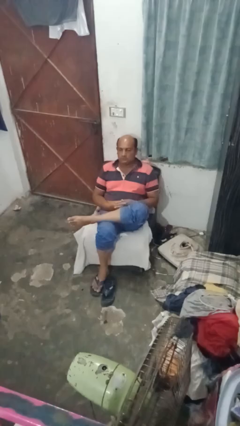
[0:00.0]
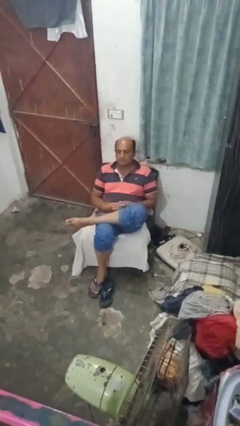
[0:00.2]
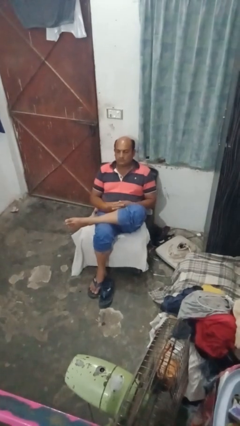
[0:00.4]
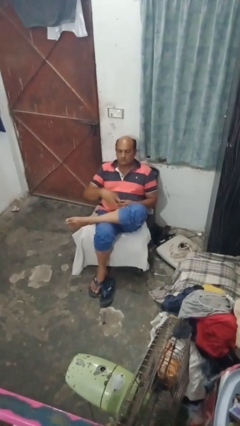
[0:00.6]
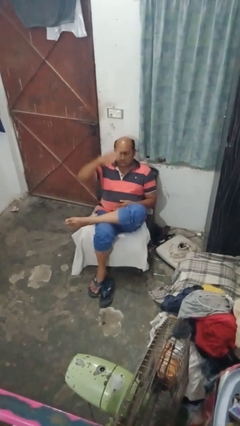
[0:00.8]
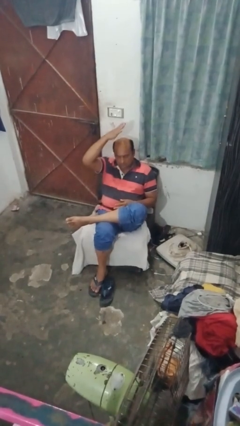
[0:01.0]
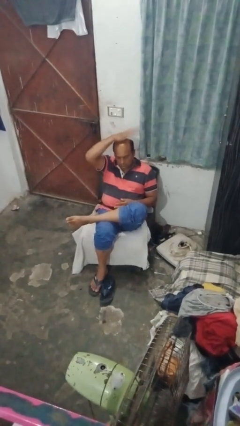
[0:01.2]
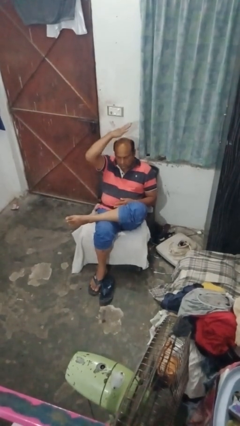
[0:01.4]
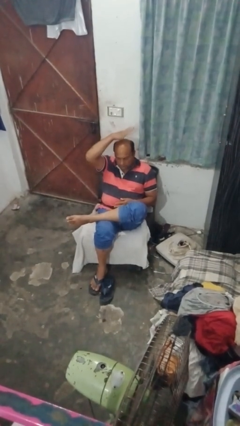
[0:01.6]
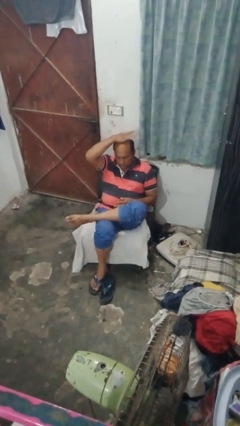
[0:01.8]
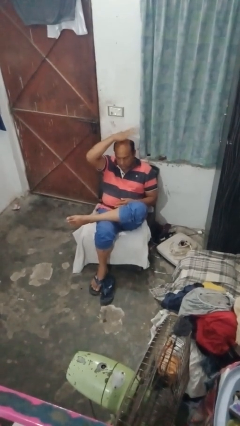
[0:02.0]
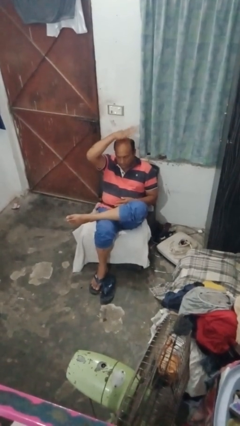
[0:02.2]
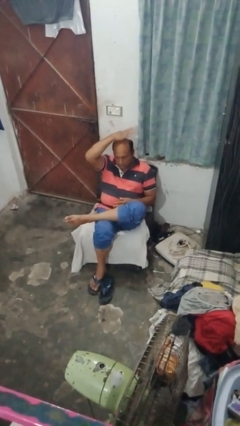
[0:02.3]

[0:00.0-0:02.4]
person pats head

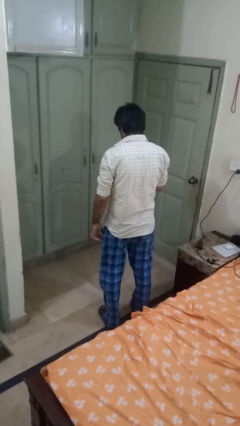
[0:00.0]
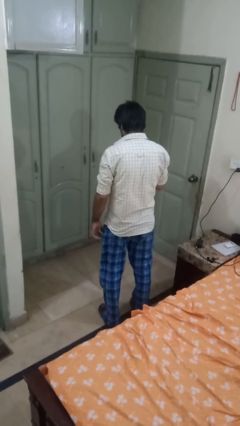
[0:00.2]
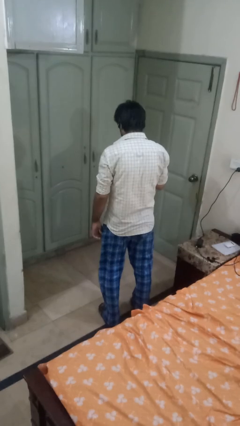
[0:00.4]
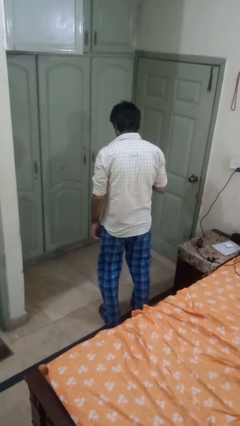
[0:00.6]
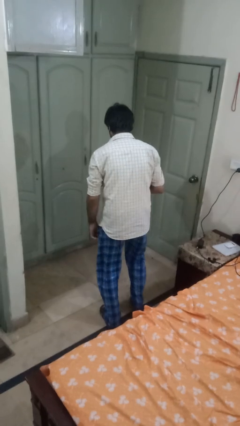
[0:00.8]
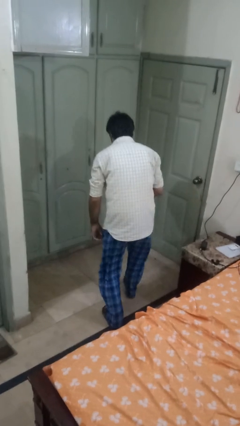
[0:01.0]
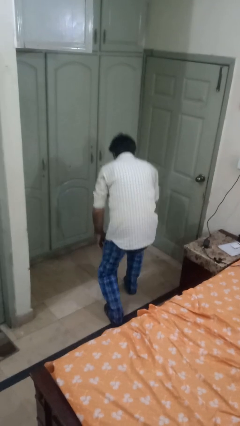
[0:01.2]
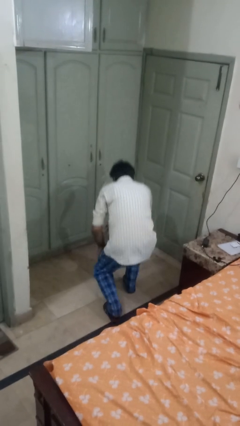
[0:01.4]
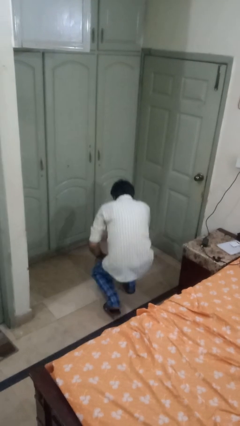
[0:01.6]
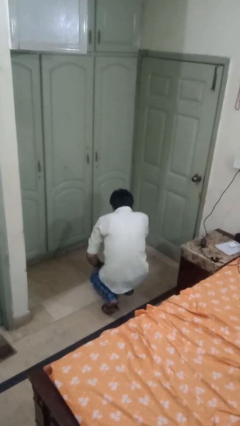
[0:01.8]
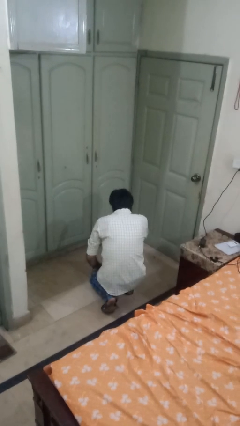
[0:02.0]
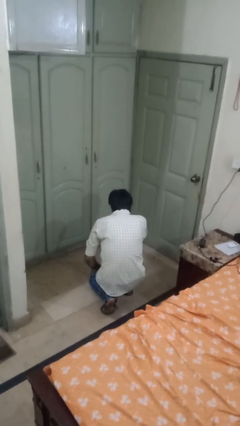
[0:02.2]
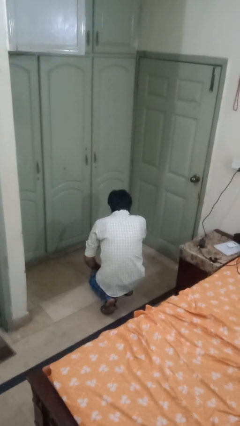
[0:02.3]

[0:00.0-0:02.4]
person kneels

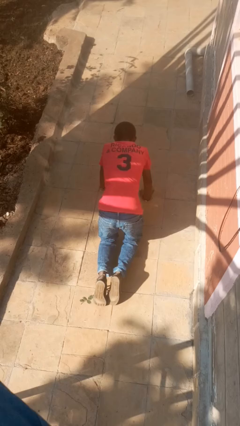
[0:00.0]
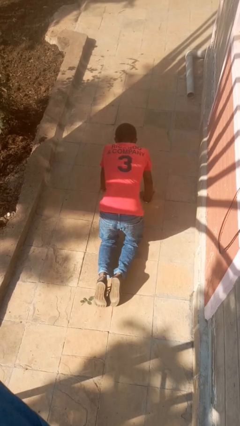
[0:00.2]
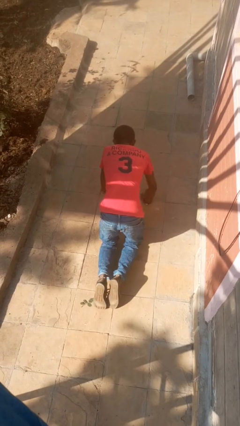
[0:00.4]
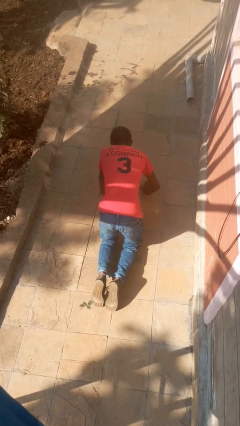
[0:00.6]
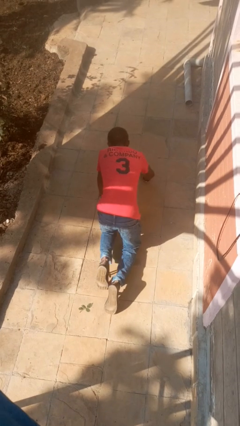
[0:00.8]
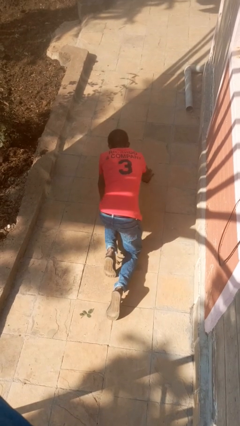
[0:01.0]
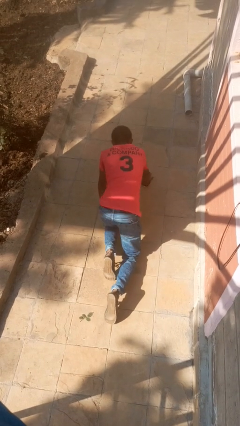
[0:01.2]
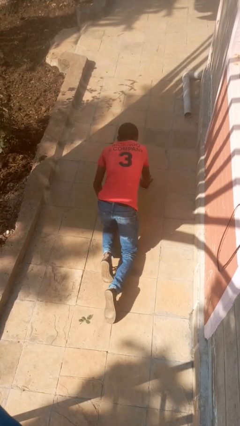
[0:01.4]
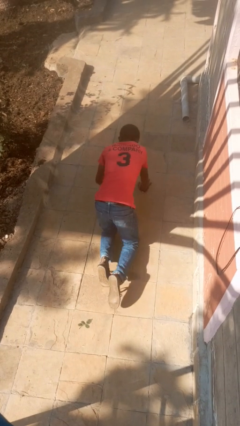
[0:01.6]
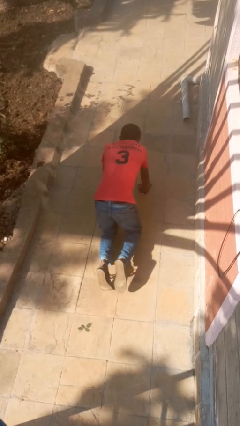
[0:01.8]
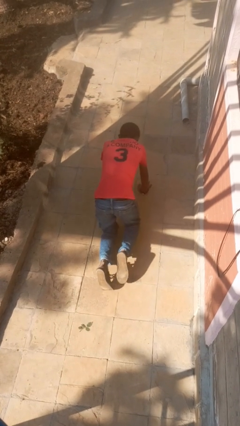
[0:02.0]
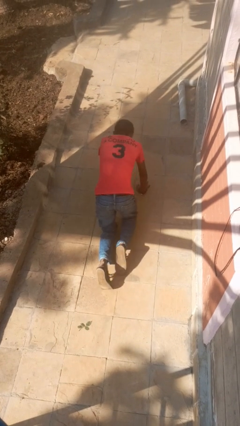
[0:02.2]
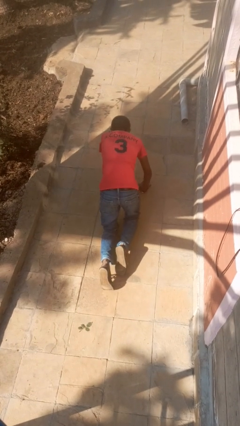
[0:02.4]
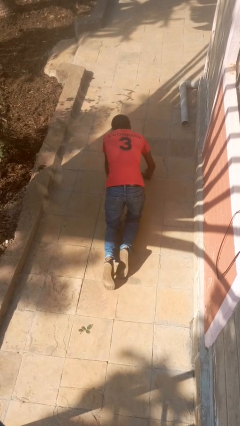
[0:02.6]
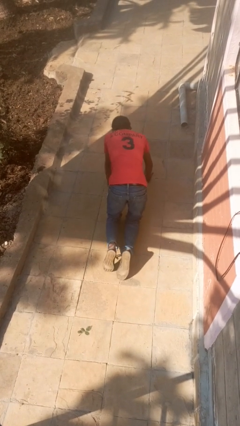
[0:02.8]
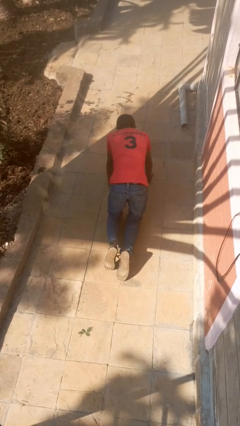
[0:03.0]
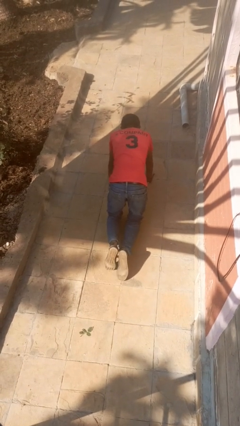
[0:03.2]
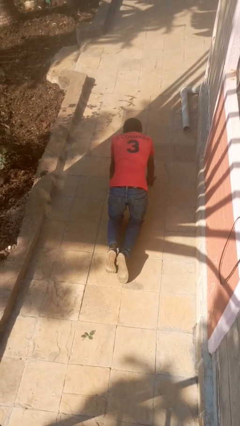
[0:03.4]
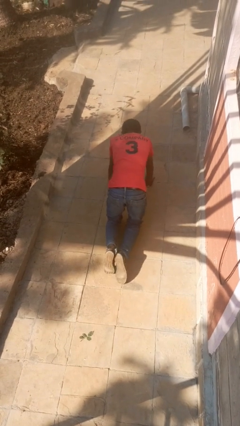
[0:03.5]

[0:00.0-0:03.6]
person crawls

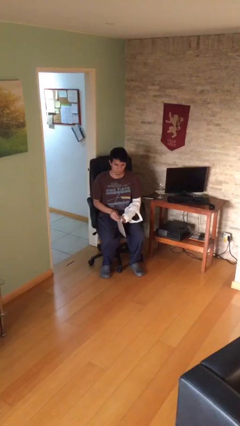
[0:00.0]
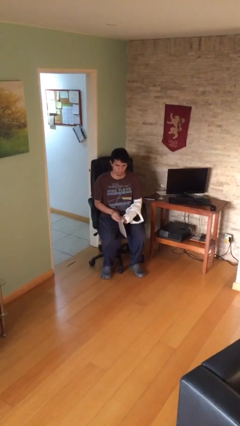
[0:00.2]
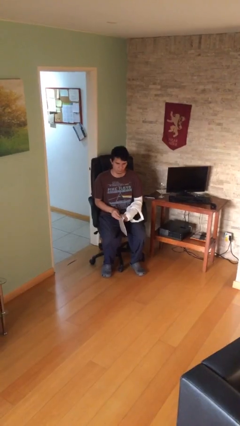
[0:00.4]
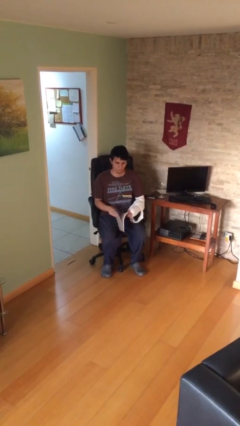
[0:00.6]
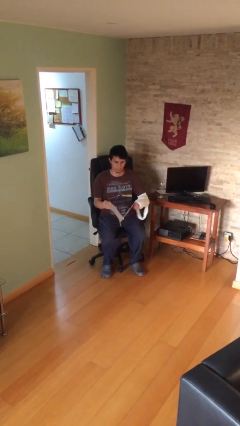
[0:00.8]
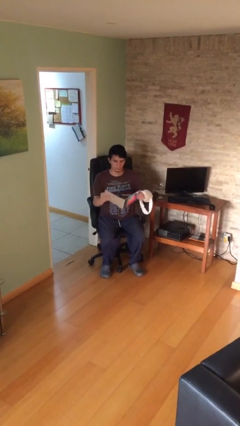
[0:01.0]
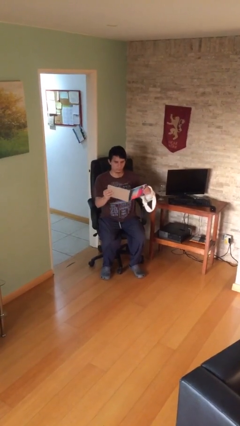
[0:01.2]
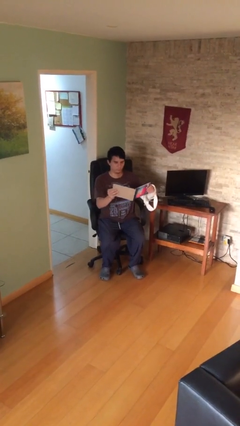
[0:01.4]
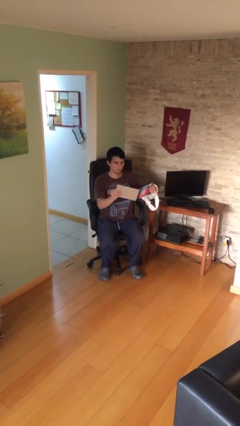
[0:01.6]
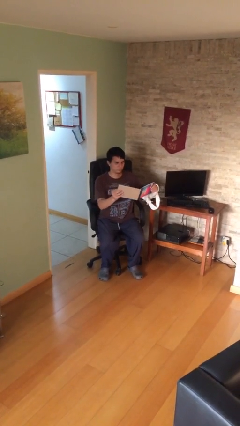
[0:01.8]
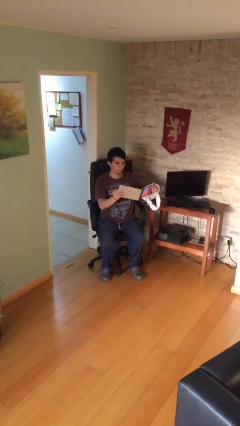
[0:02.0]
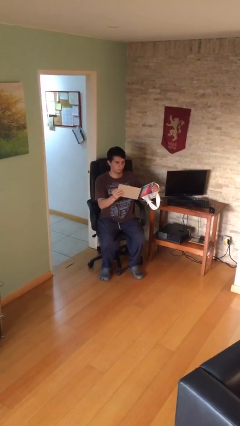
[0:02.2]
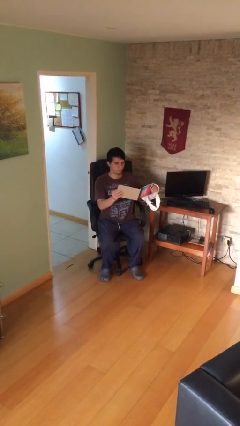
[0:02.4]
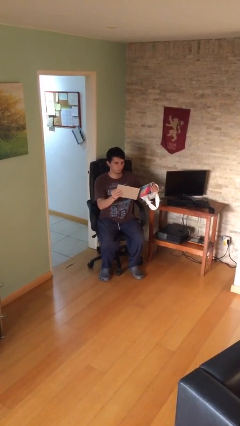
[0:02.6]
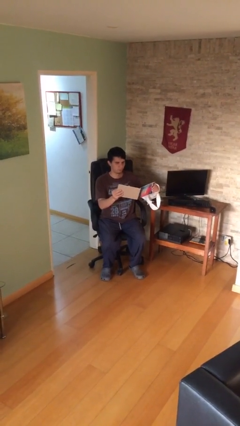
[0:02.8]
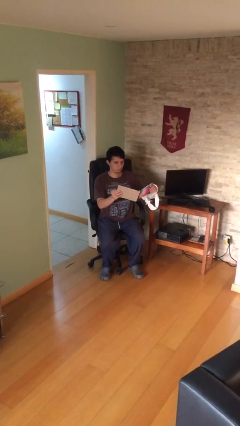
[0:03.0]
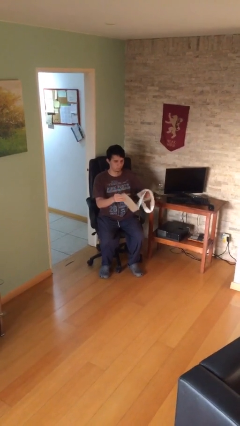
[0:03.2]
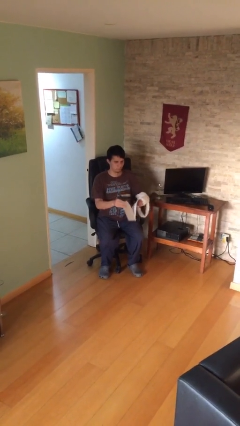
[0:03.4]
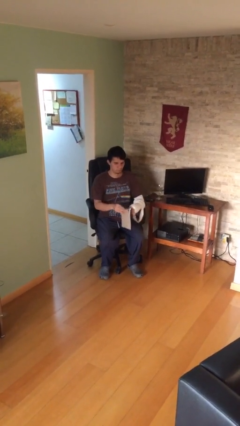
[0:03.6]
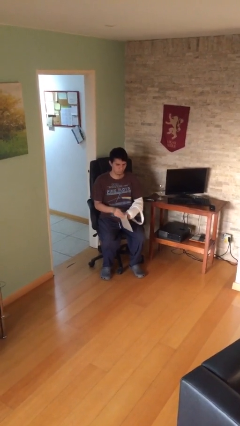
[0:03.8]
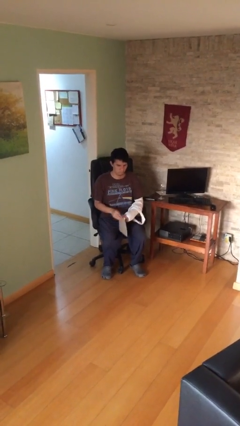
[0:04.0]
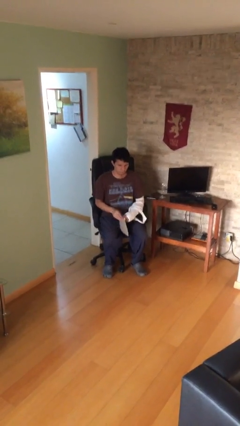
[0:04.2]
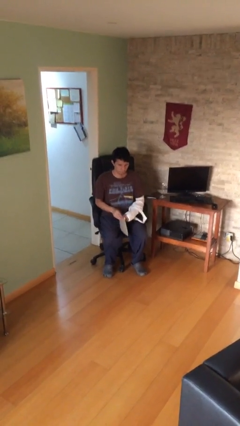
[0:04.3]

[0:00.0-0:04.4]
person reads document

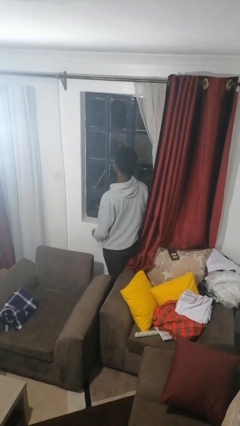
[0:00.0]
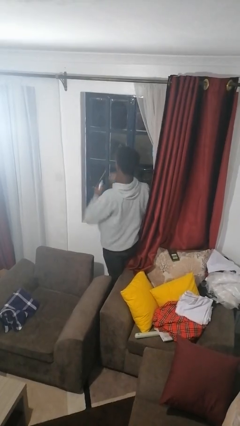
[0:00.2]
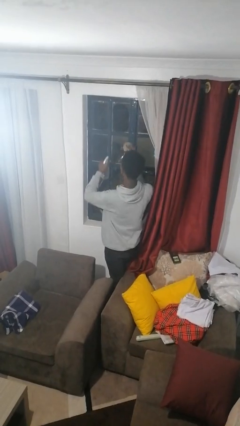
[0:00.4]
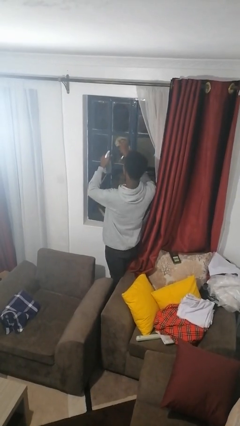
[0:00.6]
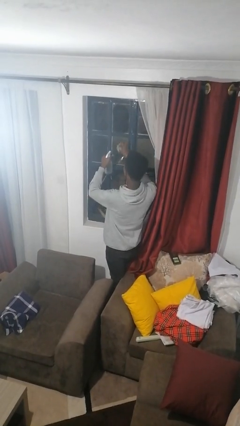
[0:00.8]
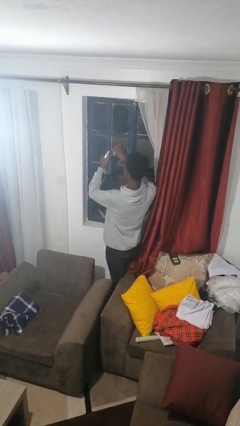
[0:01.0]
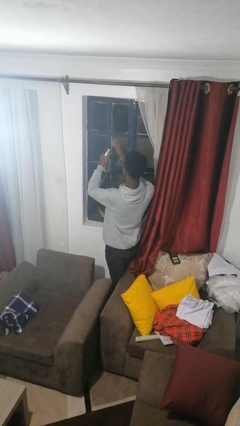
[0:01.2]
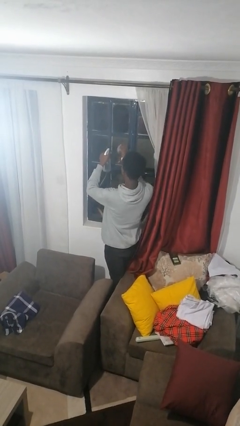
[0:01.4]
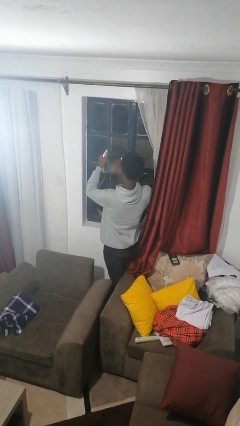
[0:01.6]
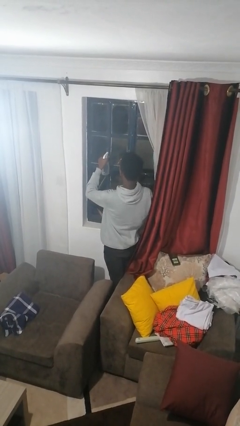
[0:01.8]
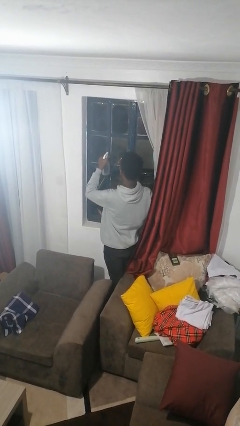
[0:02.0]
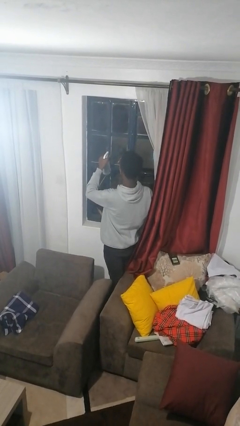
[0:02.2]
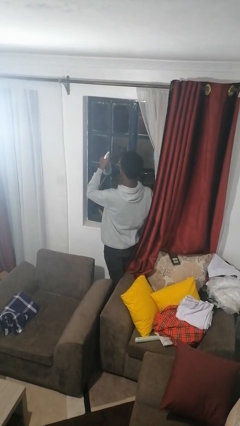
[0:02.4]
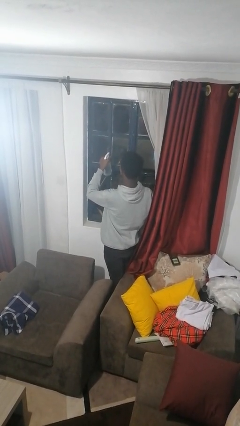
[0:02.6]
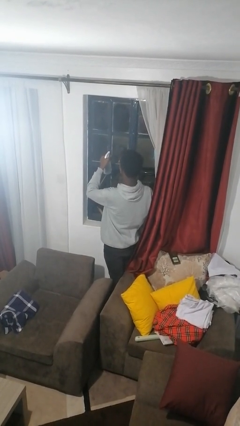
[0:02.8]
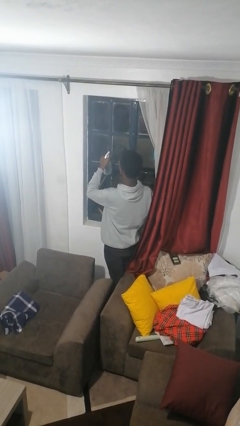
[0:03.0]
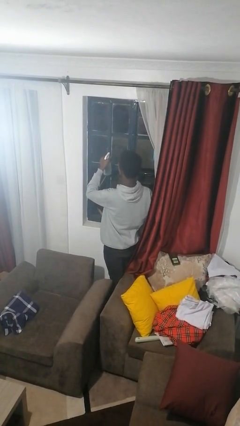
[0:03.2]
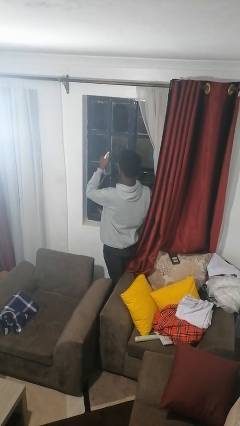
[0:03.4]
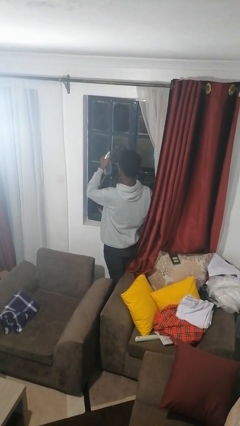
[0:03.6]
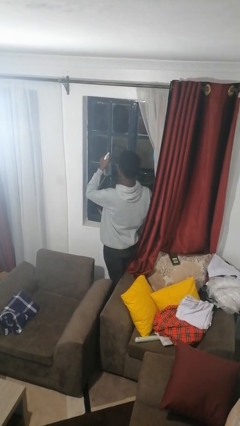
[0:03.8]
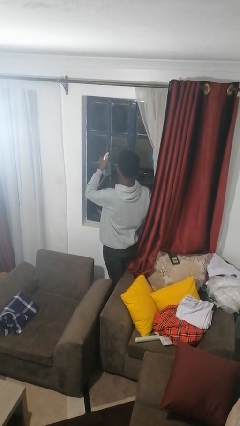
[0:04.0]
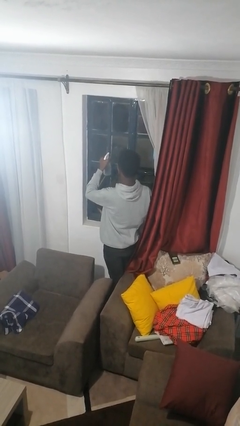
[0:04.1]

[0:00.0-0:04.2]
person sprays from bottle
